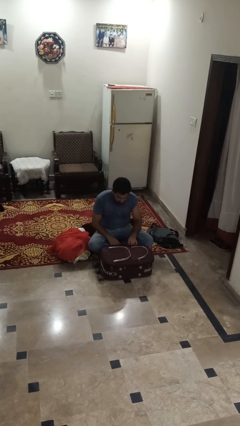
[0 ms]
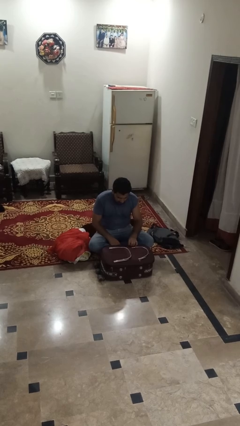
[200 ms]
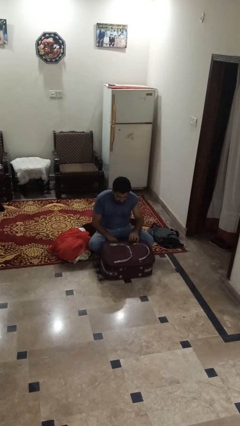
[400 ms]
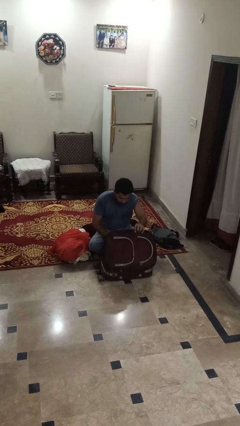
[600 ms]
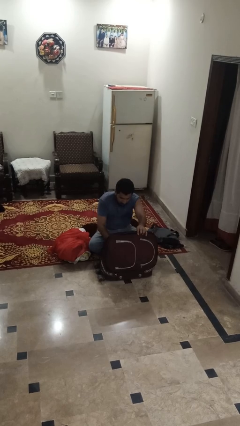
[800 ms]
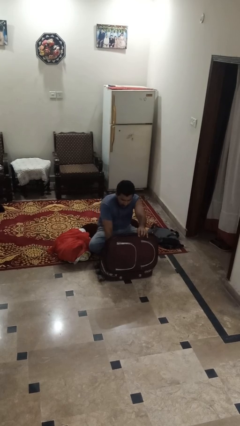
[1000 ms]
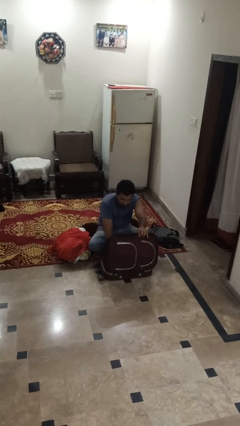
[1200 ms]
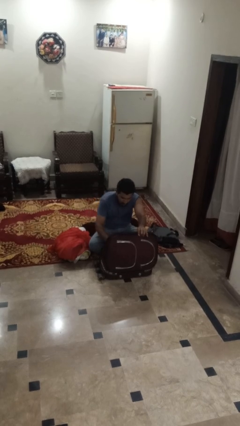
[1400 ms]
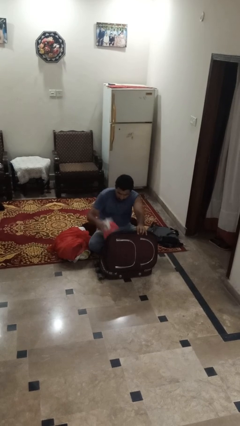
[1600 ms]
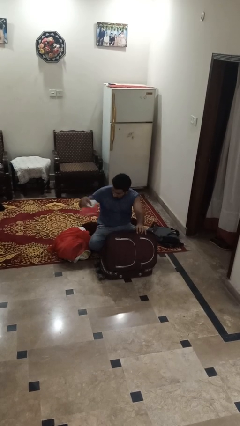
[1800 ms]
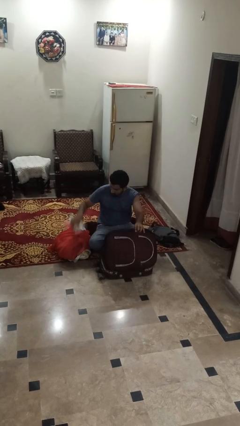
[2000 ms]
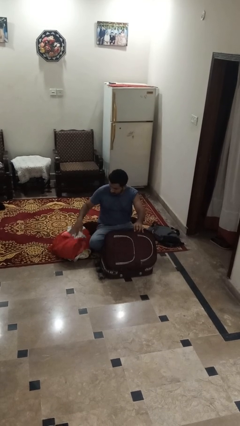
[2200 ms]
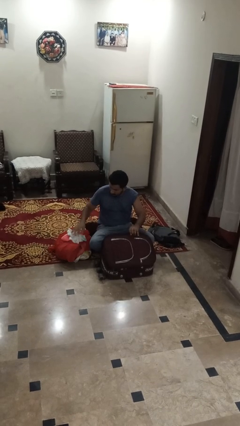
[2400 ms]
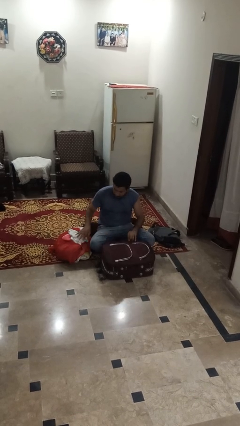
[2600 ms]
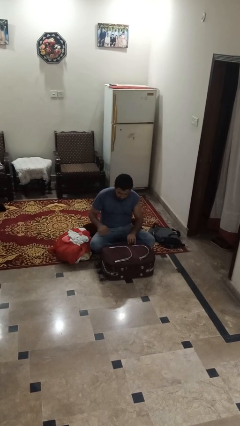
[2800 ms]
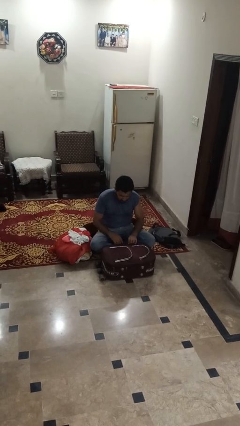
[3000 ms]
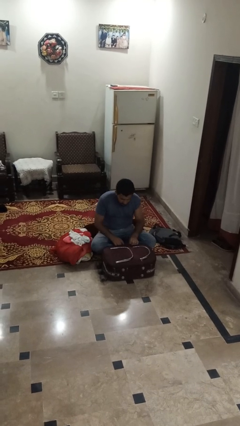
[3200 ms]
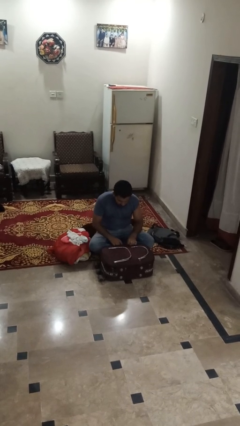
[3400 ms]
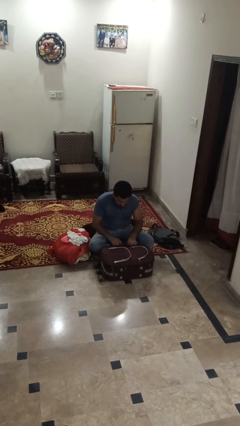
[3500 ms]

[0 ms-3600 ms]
person unloads clothes from suitcase

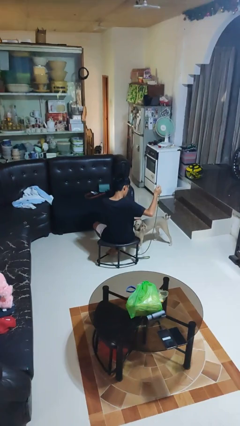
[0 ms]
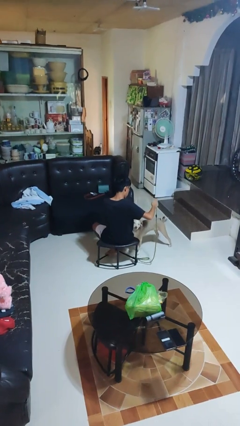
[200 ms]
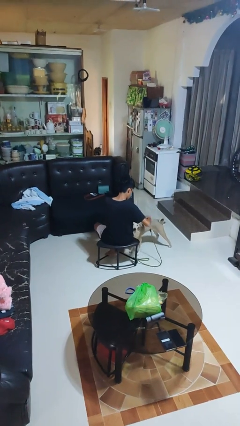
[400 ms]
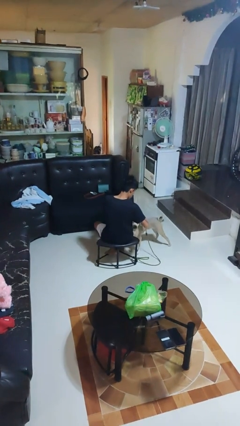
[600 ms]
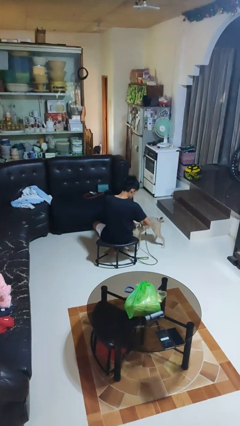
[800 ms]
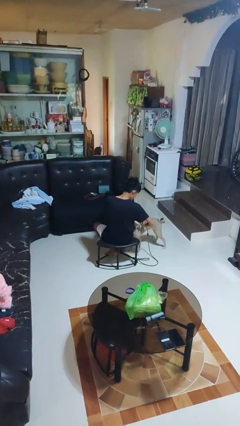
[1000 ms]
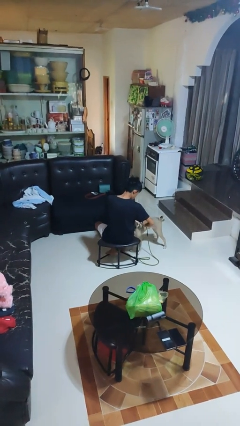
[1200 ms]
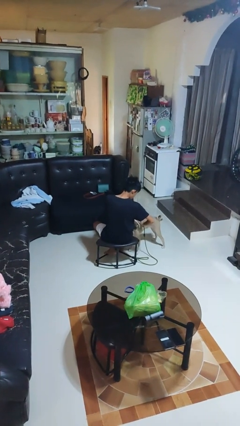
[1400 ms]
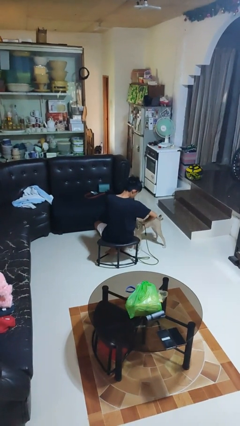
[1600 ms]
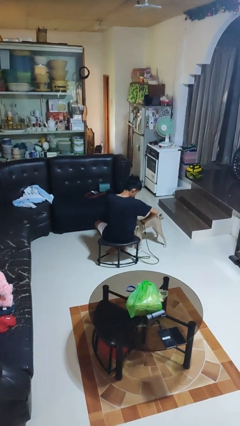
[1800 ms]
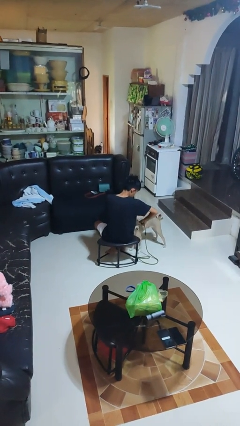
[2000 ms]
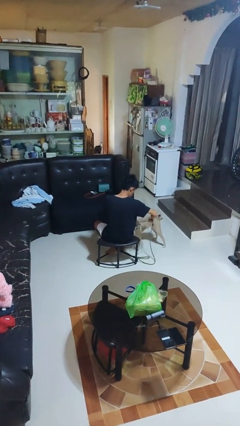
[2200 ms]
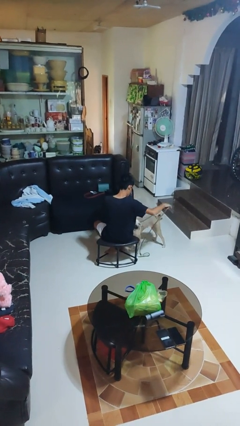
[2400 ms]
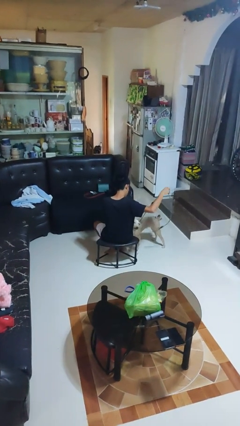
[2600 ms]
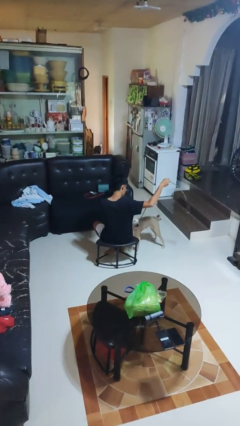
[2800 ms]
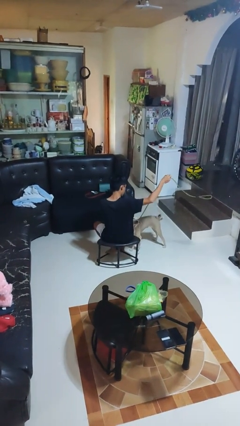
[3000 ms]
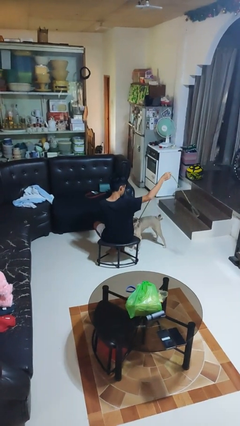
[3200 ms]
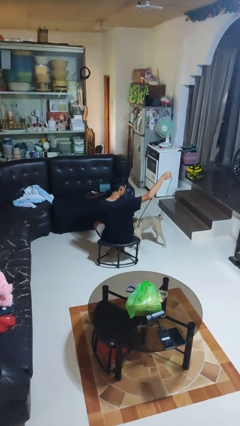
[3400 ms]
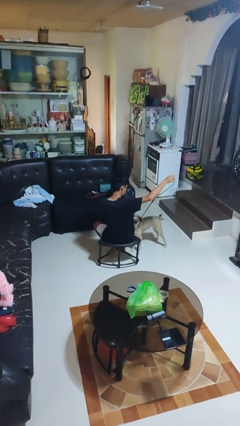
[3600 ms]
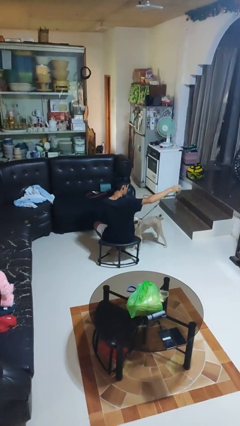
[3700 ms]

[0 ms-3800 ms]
person attaches leash to dog

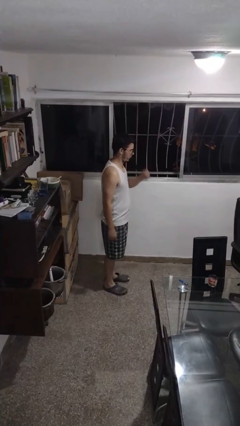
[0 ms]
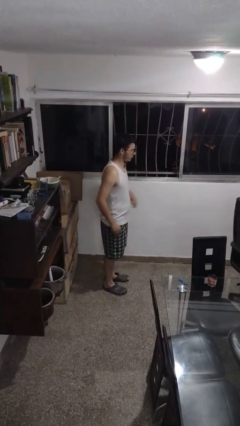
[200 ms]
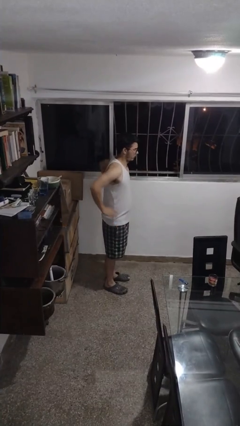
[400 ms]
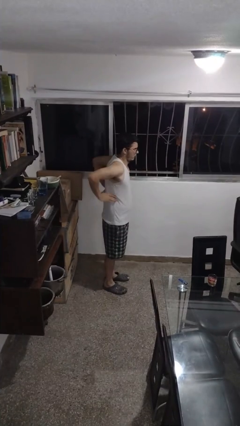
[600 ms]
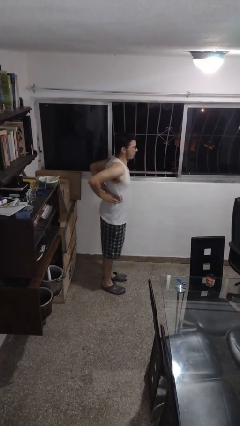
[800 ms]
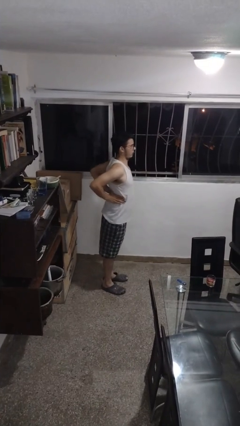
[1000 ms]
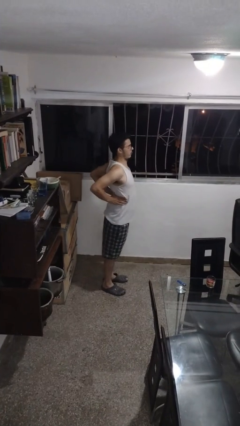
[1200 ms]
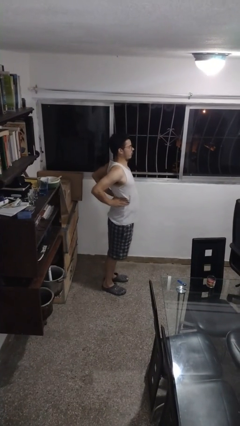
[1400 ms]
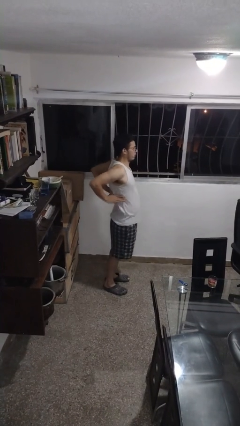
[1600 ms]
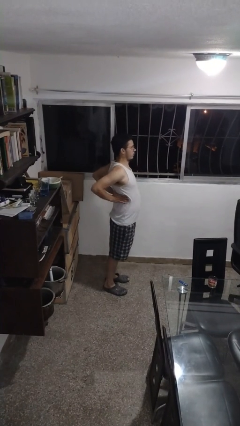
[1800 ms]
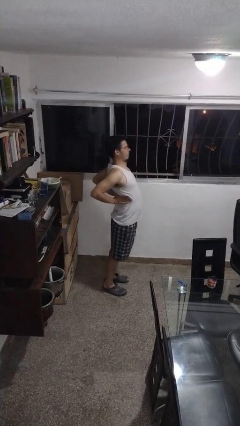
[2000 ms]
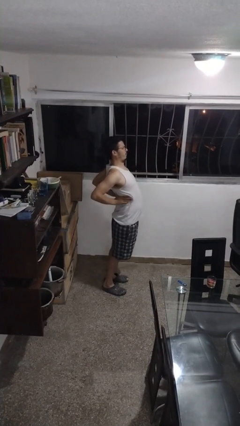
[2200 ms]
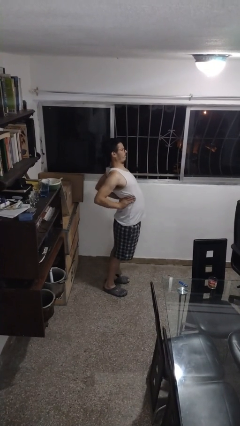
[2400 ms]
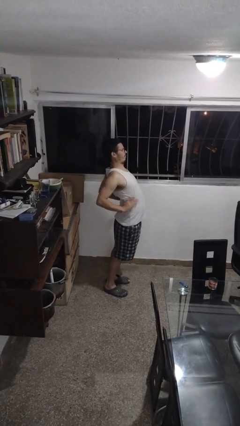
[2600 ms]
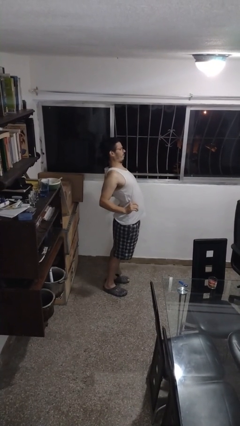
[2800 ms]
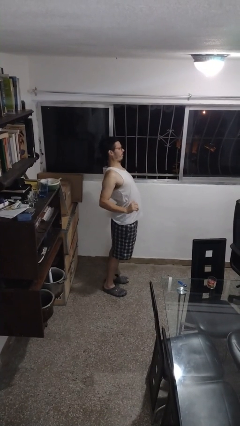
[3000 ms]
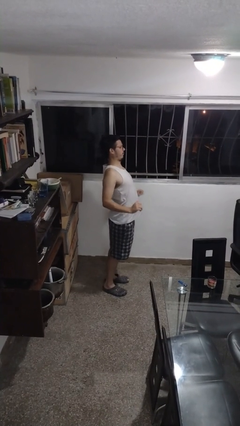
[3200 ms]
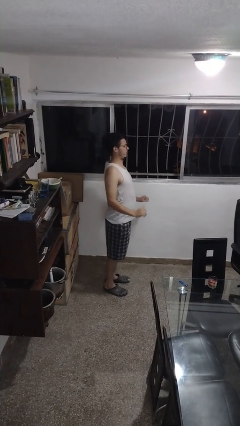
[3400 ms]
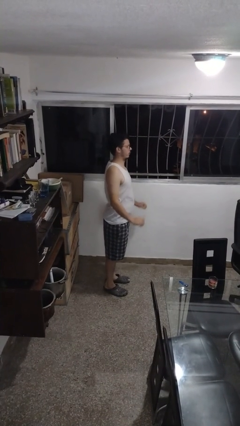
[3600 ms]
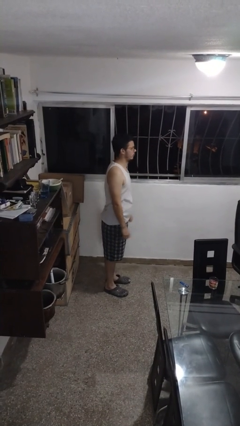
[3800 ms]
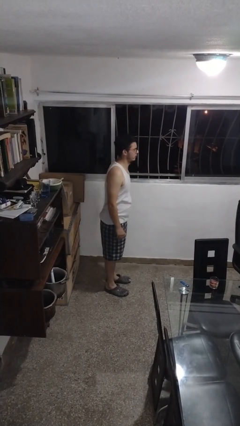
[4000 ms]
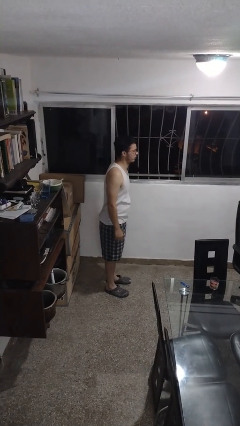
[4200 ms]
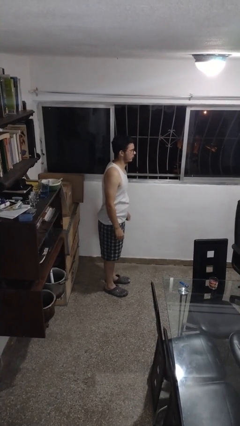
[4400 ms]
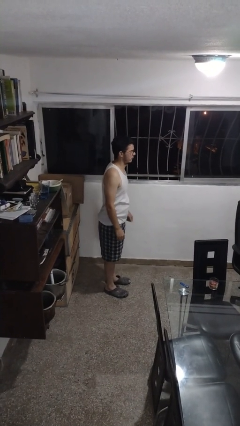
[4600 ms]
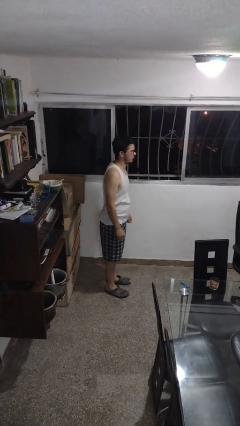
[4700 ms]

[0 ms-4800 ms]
person stretches back

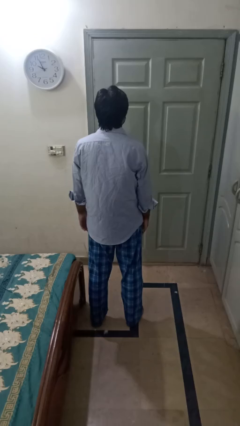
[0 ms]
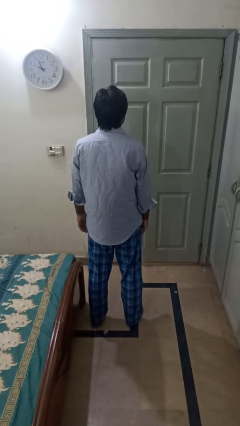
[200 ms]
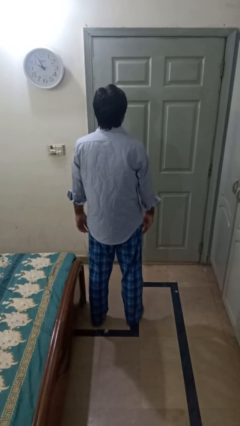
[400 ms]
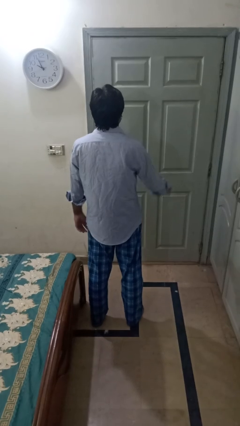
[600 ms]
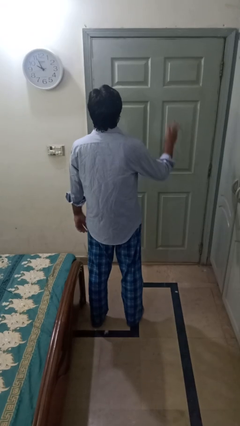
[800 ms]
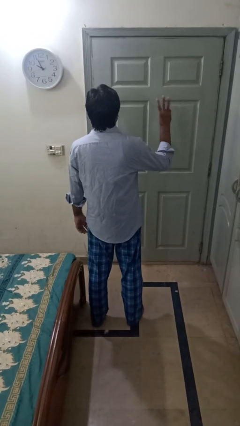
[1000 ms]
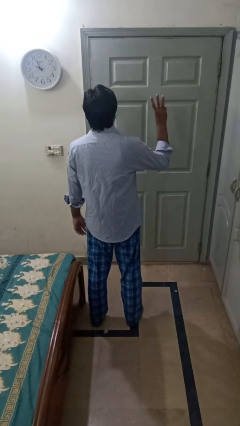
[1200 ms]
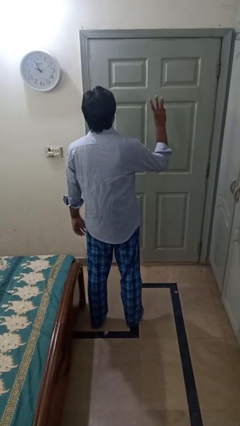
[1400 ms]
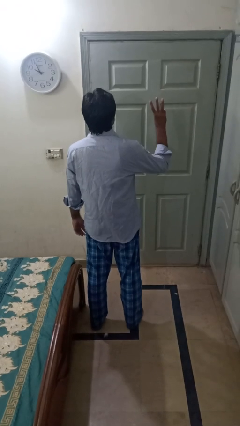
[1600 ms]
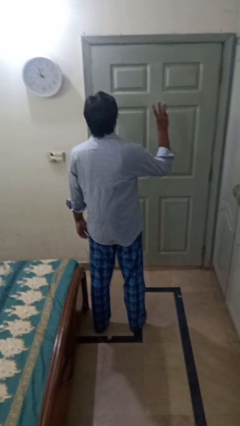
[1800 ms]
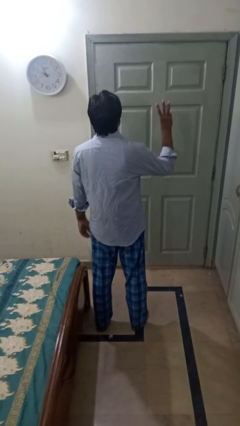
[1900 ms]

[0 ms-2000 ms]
person gestures number three

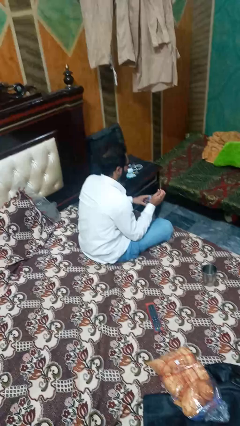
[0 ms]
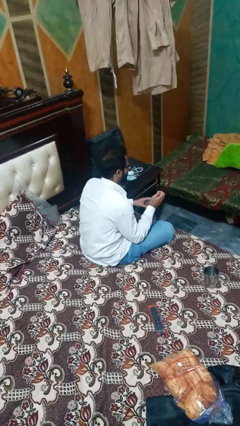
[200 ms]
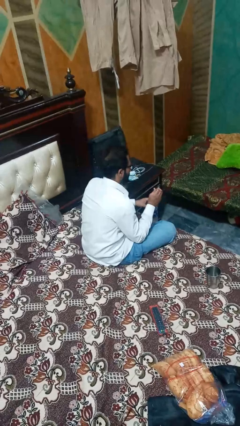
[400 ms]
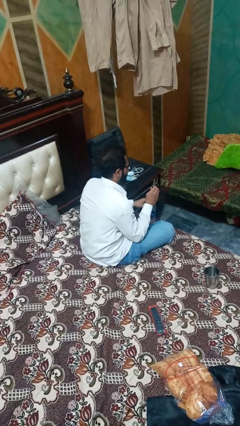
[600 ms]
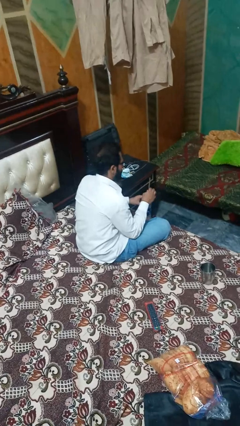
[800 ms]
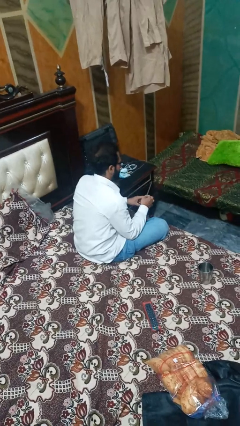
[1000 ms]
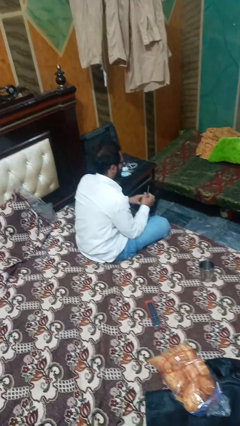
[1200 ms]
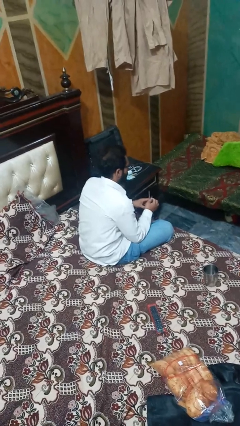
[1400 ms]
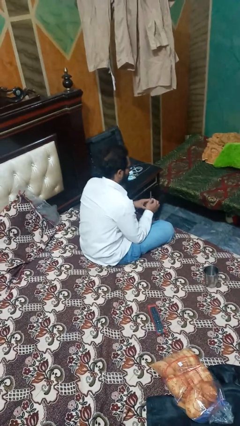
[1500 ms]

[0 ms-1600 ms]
person unscrews lid from bottle

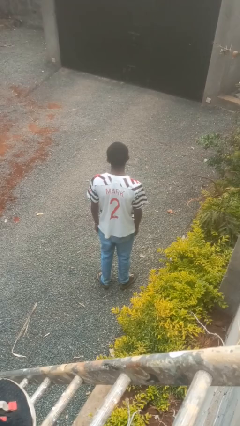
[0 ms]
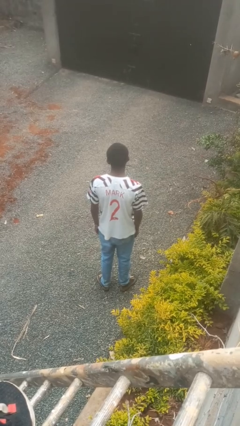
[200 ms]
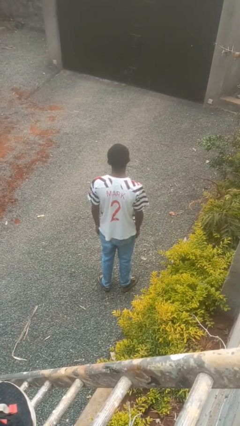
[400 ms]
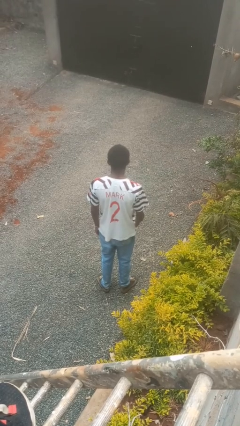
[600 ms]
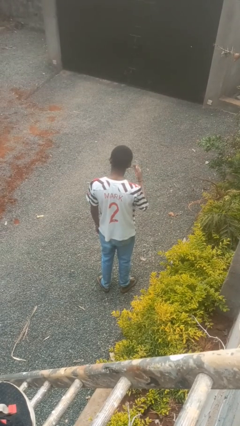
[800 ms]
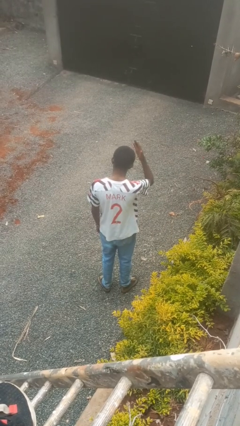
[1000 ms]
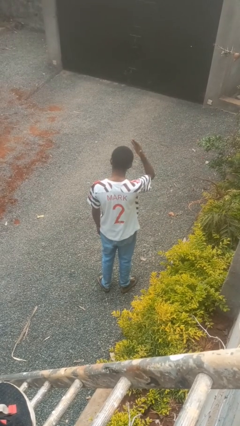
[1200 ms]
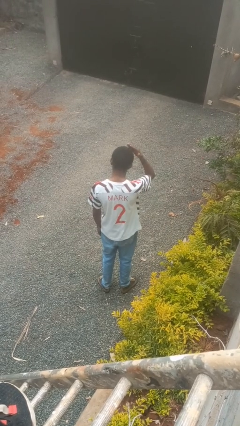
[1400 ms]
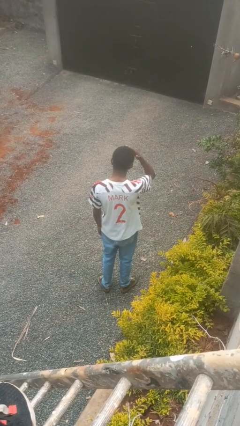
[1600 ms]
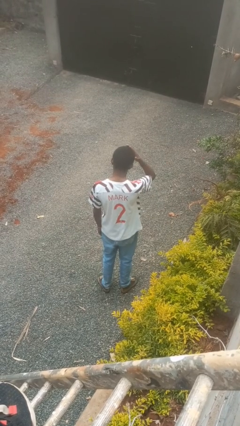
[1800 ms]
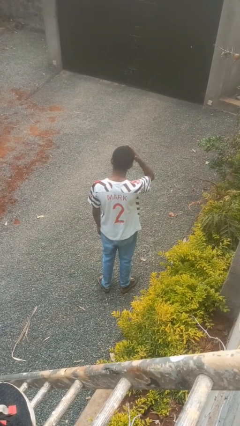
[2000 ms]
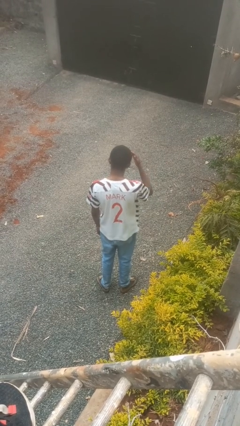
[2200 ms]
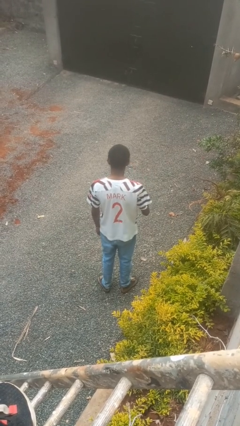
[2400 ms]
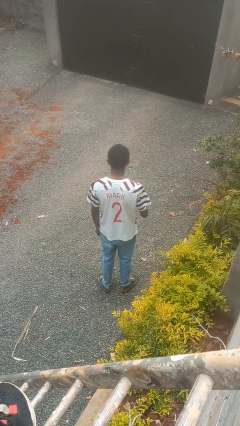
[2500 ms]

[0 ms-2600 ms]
person pats head
